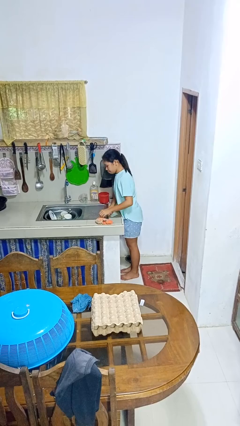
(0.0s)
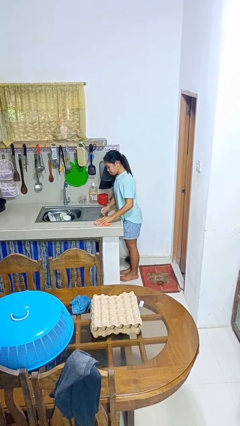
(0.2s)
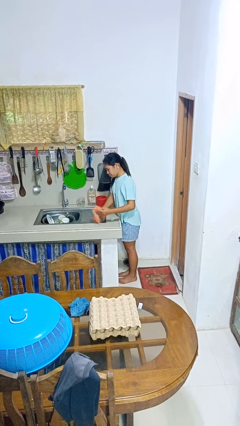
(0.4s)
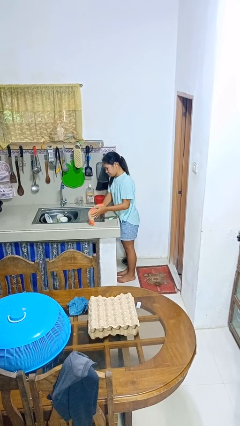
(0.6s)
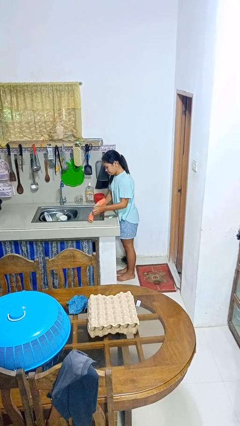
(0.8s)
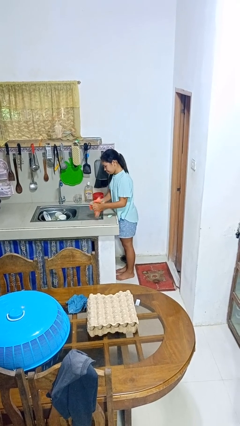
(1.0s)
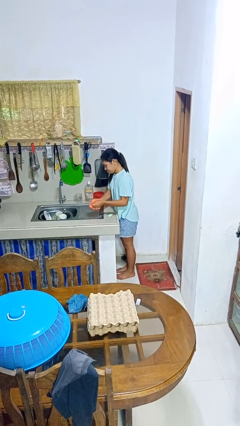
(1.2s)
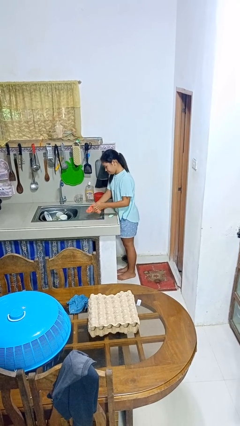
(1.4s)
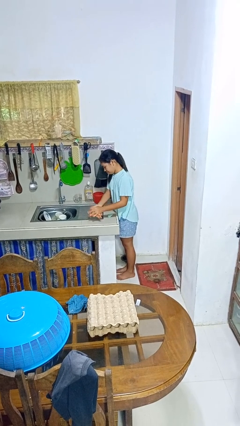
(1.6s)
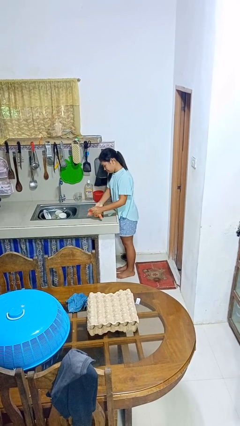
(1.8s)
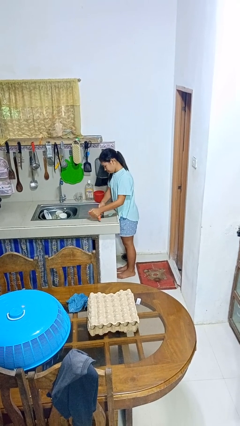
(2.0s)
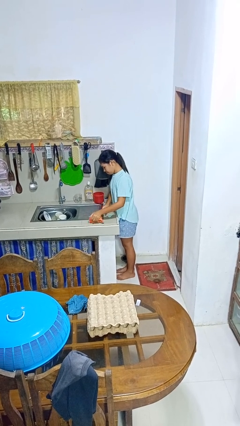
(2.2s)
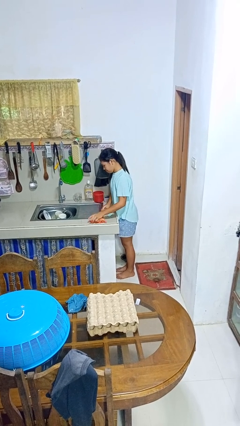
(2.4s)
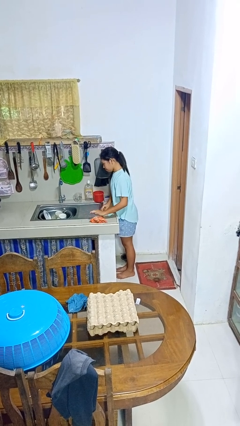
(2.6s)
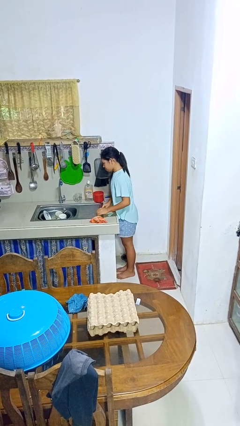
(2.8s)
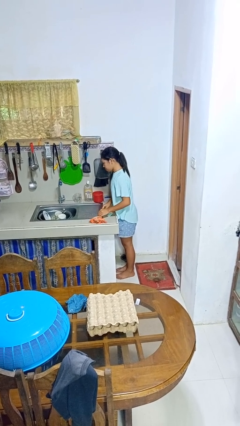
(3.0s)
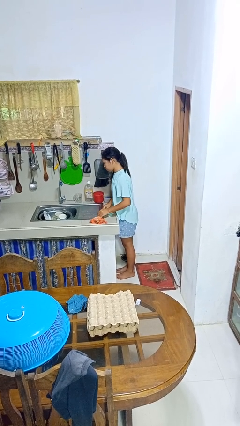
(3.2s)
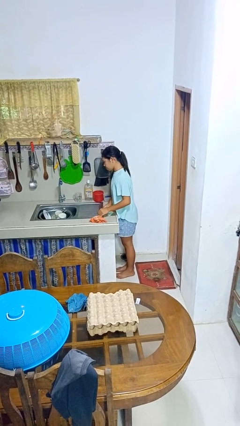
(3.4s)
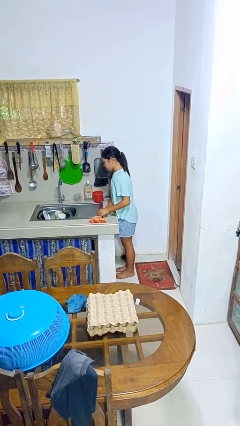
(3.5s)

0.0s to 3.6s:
person dries hands with towel

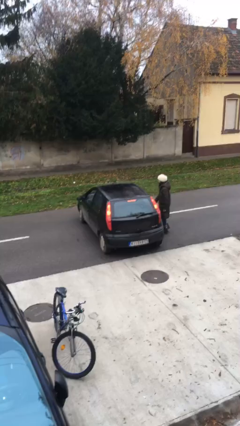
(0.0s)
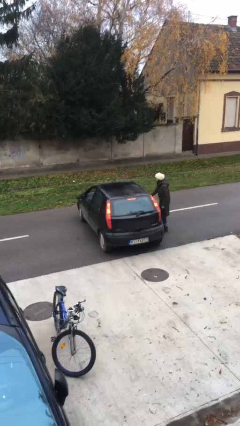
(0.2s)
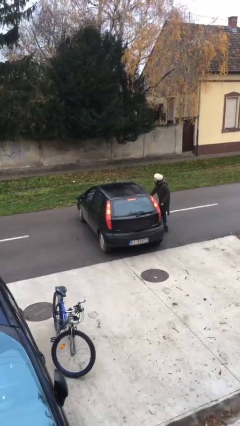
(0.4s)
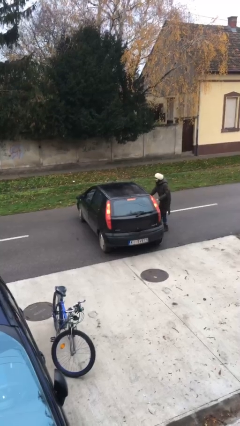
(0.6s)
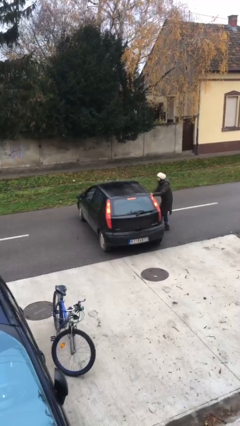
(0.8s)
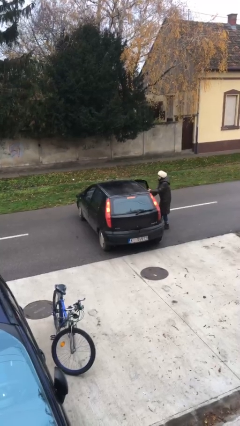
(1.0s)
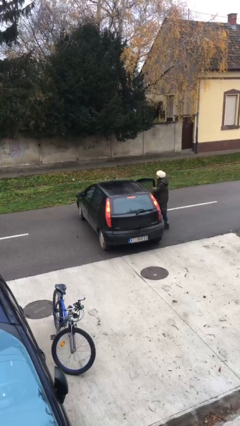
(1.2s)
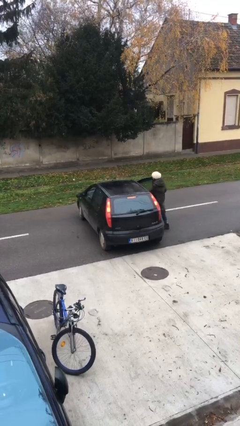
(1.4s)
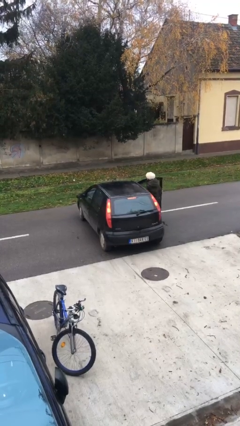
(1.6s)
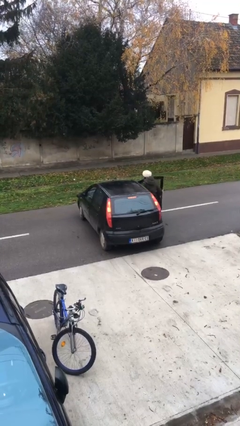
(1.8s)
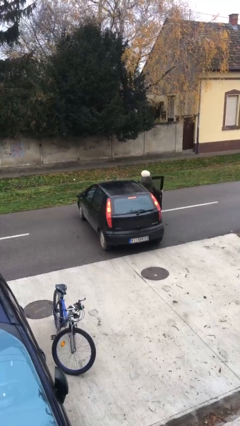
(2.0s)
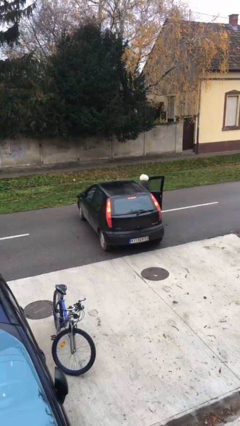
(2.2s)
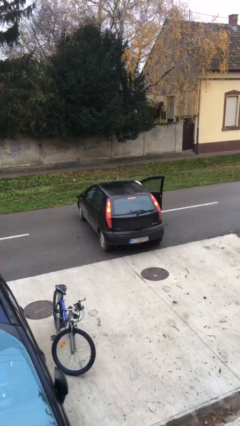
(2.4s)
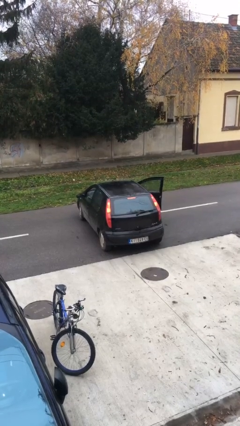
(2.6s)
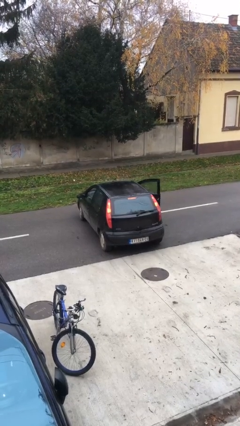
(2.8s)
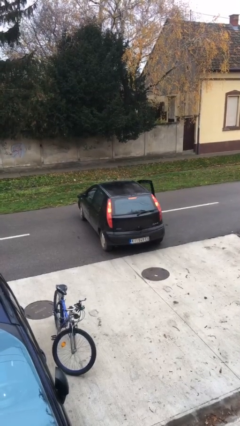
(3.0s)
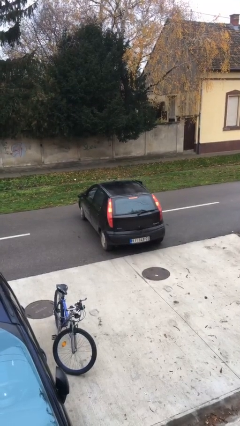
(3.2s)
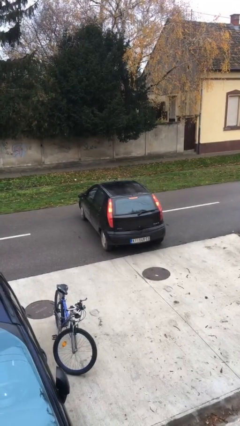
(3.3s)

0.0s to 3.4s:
car picks up person

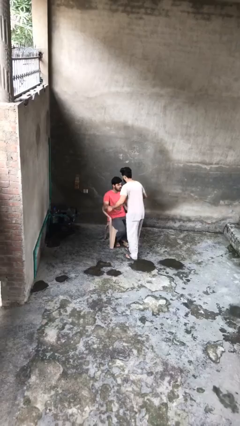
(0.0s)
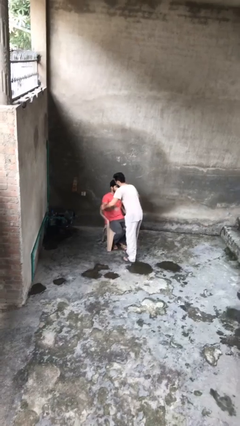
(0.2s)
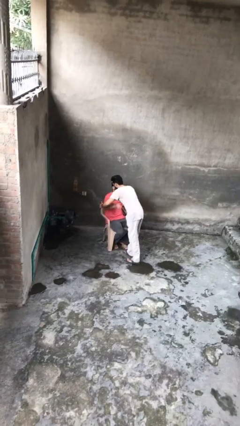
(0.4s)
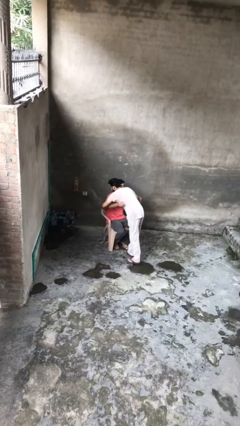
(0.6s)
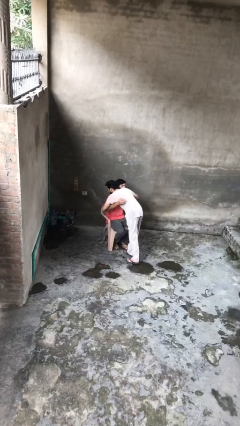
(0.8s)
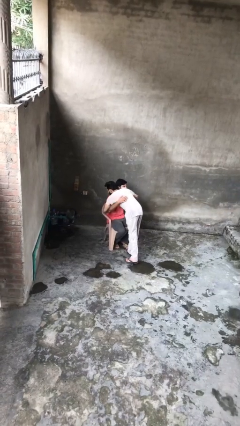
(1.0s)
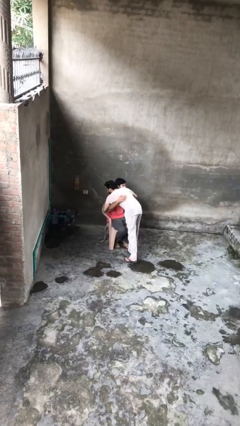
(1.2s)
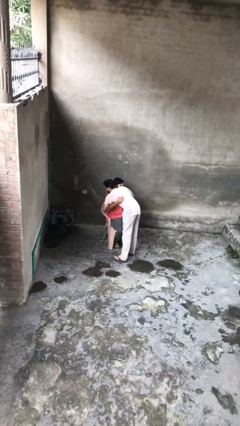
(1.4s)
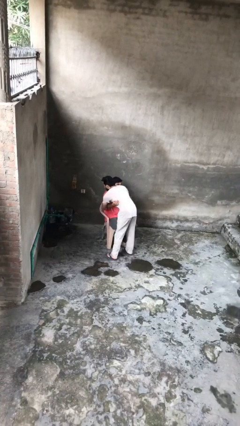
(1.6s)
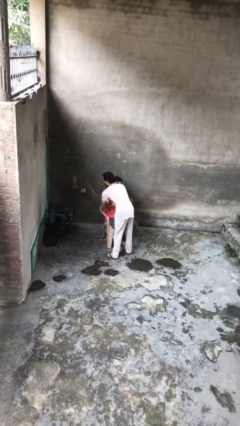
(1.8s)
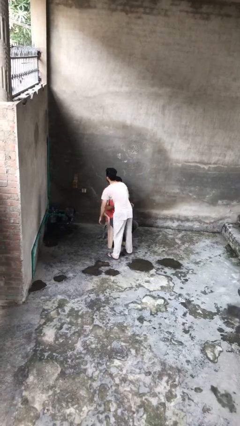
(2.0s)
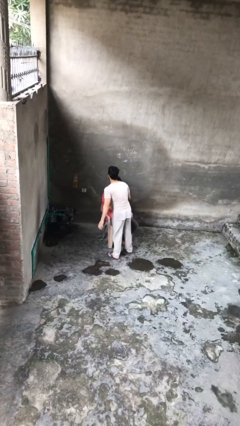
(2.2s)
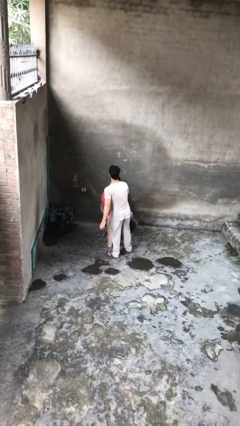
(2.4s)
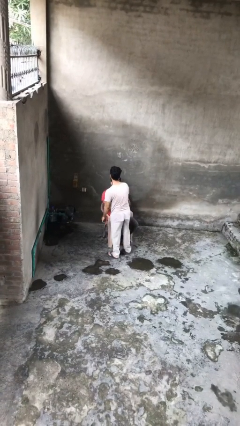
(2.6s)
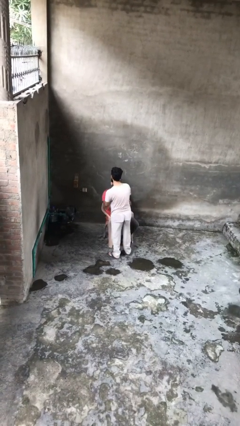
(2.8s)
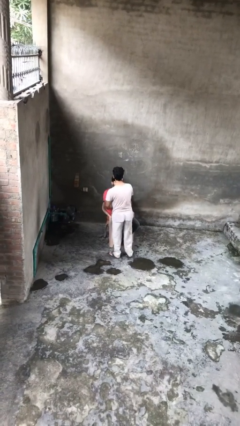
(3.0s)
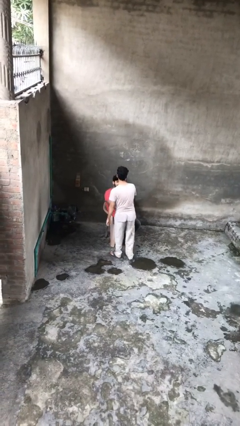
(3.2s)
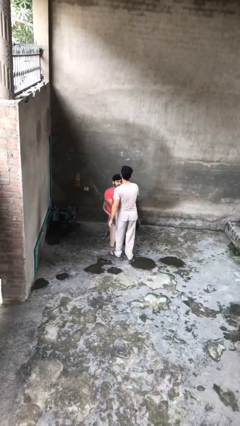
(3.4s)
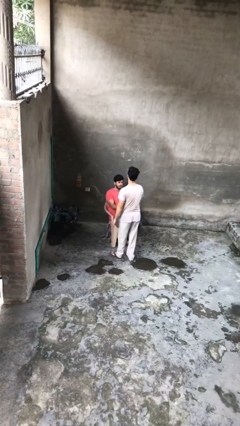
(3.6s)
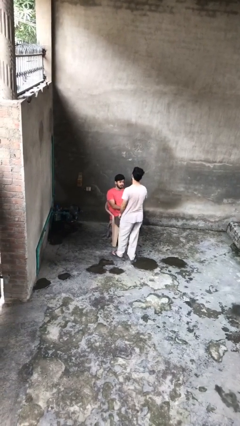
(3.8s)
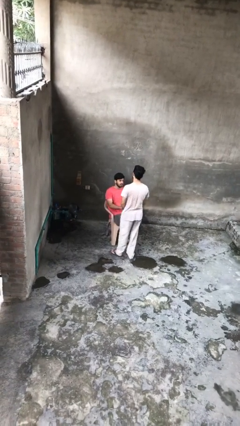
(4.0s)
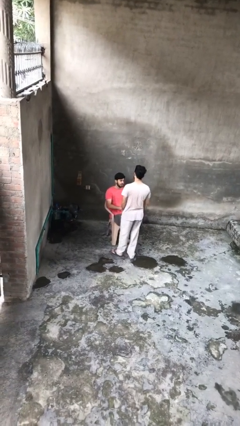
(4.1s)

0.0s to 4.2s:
person embraces person

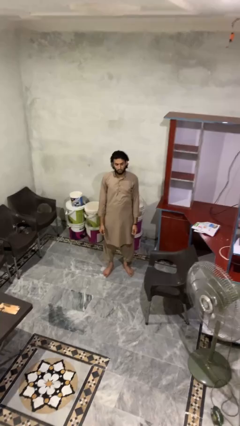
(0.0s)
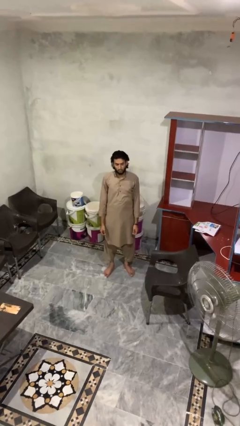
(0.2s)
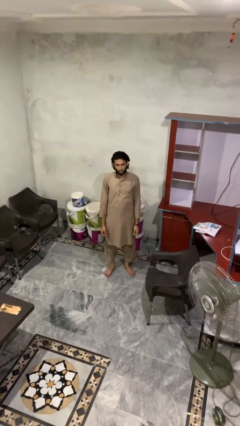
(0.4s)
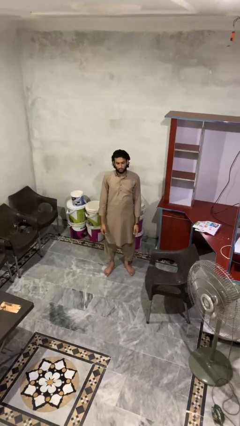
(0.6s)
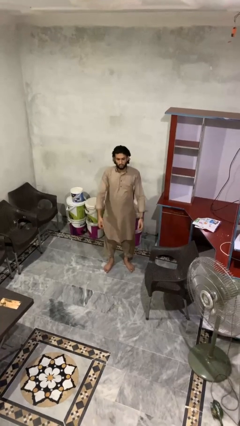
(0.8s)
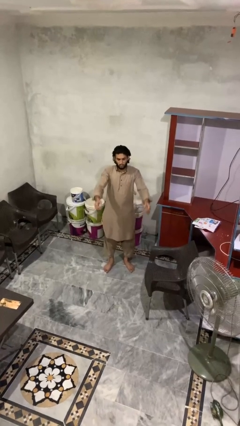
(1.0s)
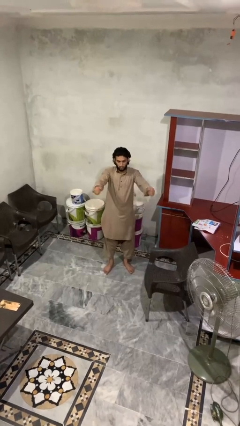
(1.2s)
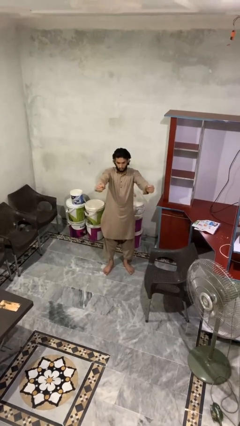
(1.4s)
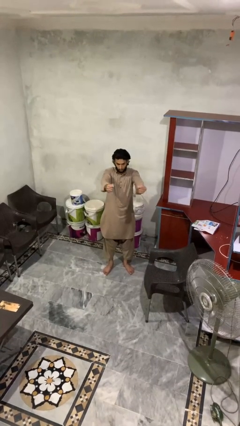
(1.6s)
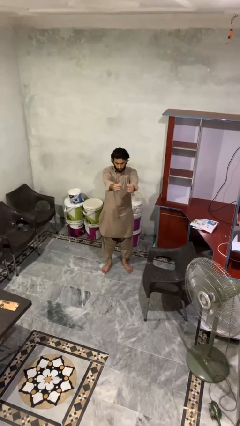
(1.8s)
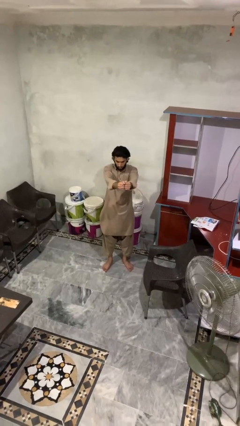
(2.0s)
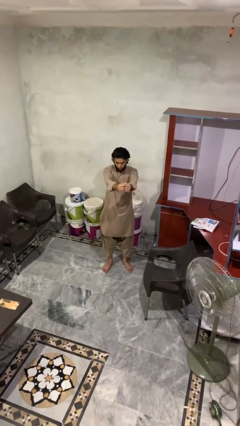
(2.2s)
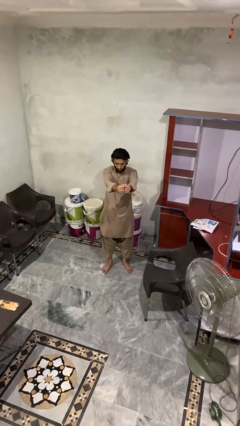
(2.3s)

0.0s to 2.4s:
person gestures zoom out

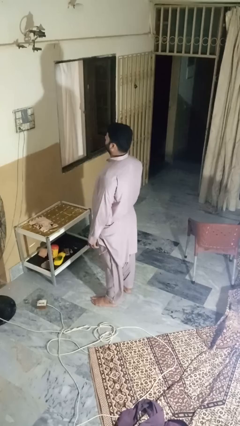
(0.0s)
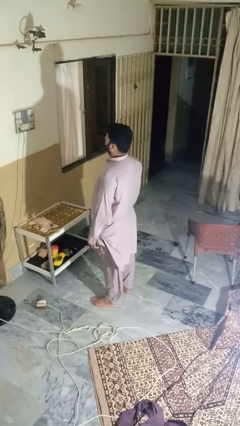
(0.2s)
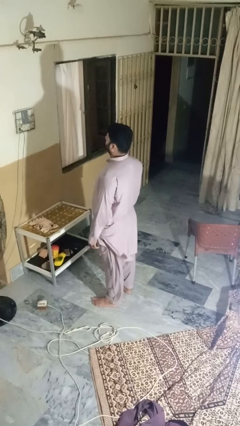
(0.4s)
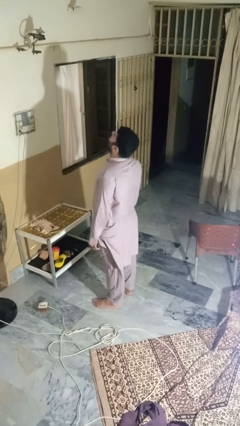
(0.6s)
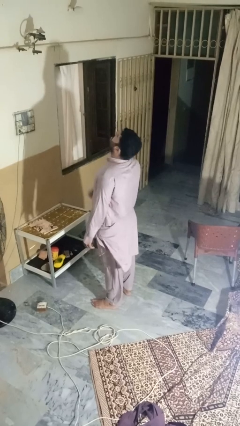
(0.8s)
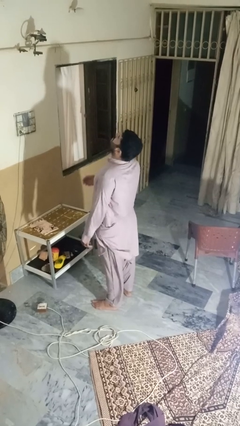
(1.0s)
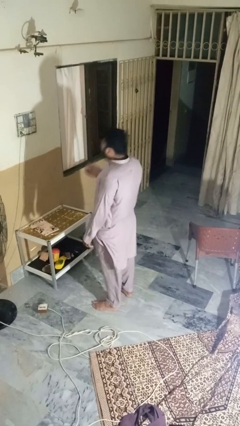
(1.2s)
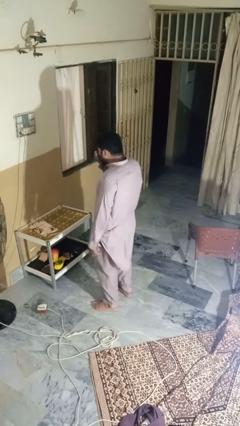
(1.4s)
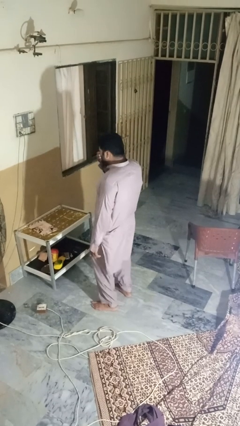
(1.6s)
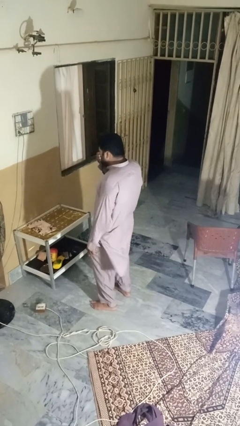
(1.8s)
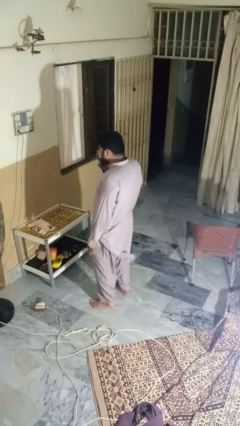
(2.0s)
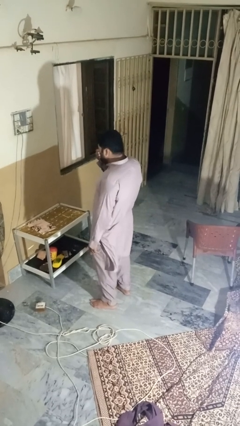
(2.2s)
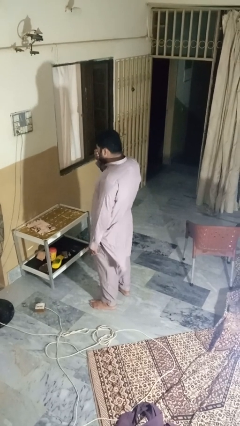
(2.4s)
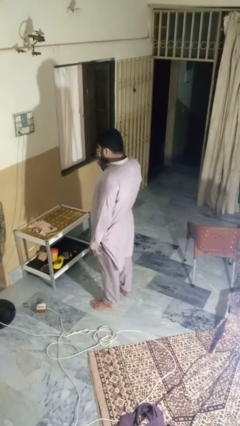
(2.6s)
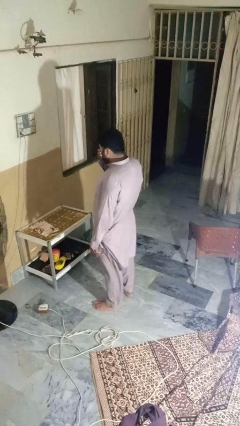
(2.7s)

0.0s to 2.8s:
person sneezes into hand

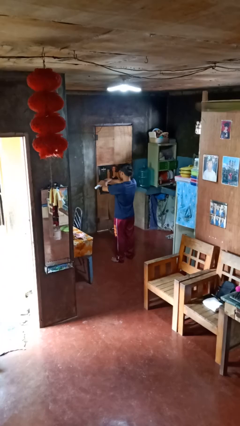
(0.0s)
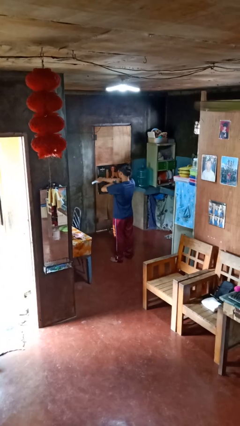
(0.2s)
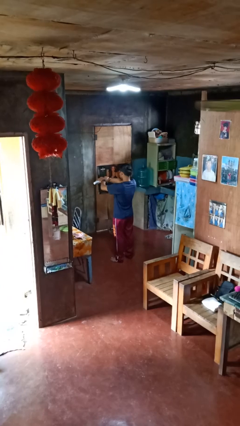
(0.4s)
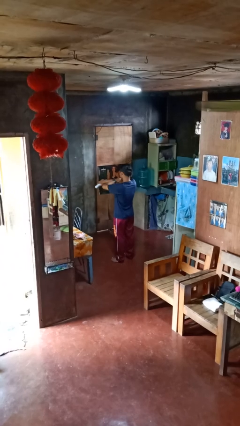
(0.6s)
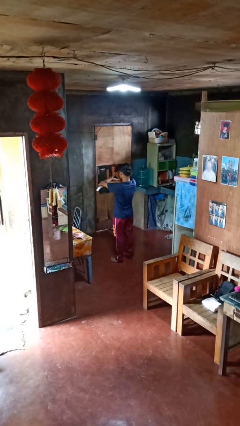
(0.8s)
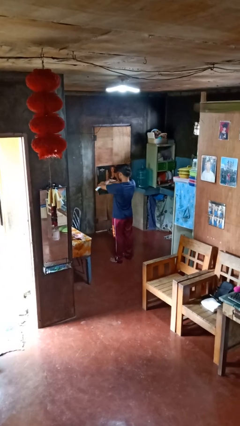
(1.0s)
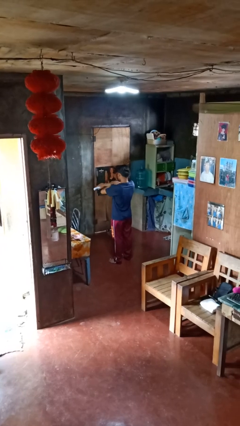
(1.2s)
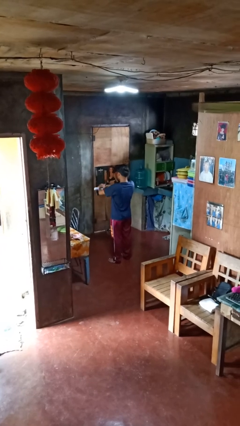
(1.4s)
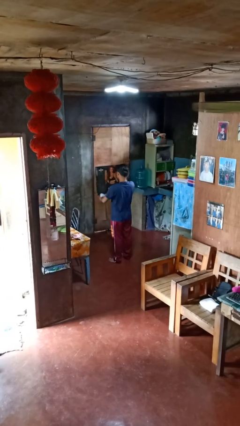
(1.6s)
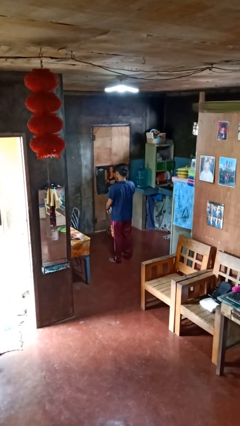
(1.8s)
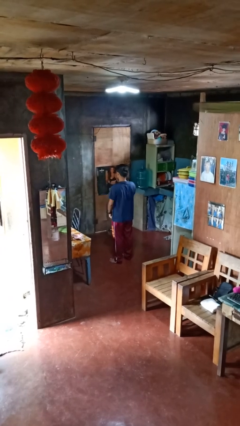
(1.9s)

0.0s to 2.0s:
person applies sunscreen
